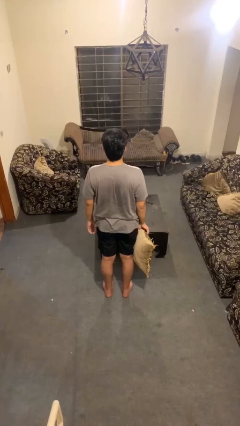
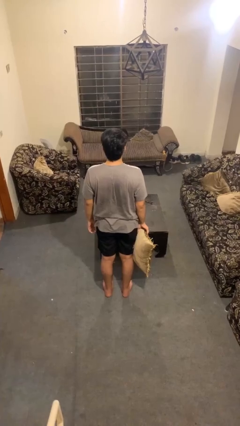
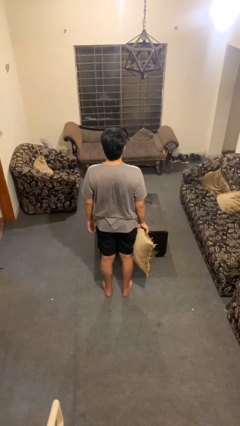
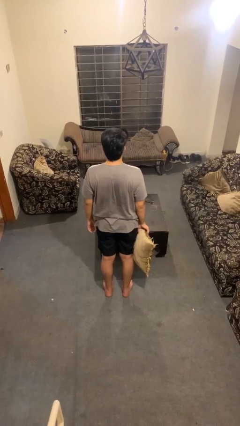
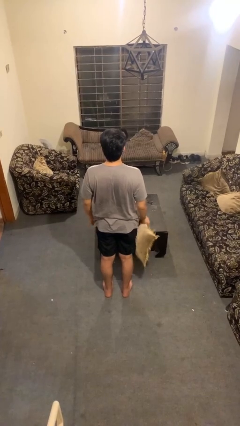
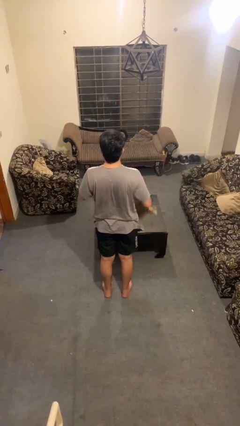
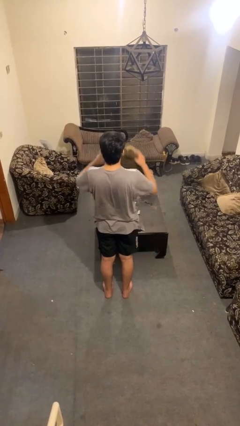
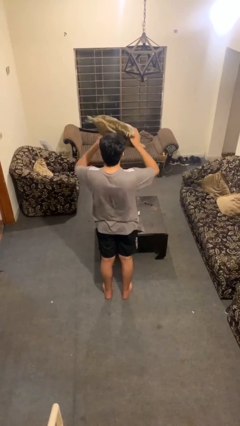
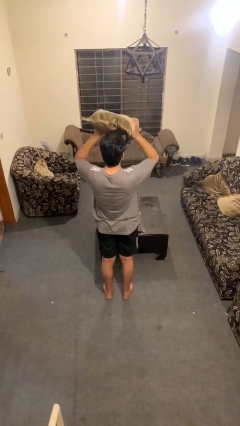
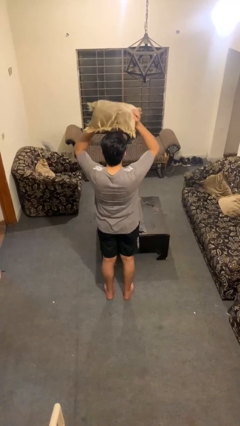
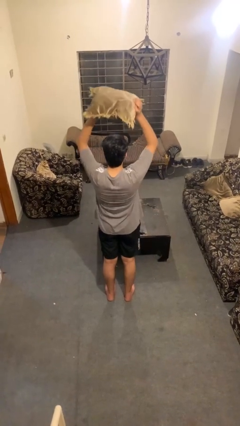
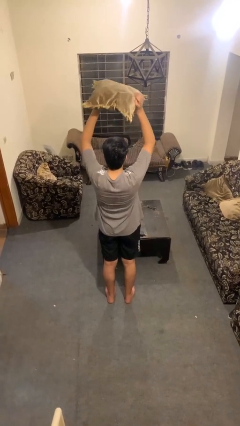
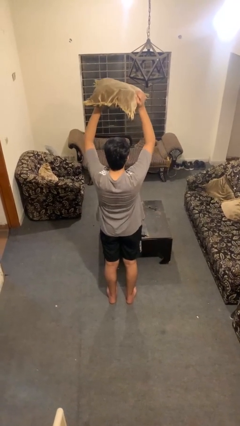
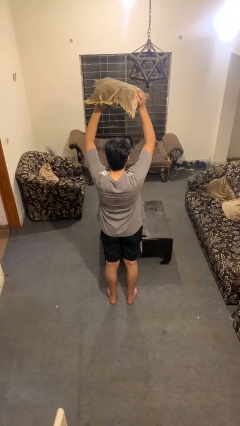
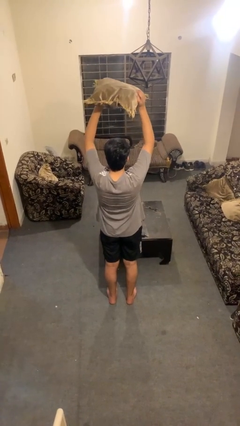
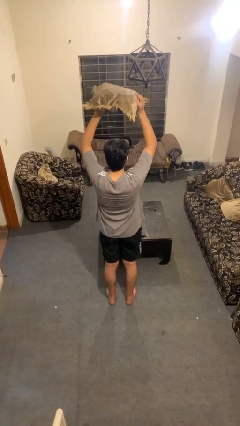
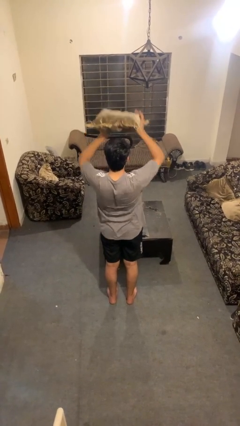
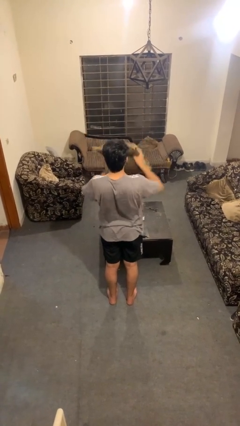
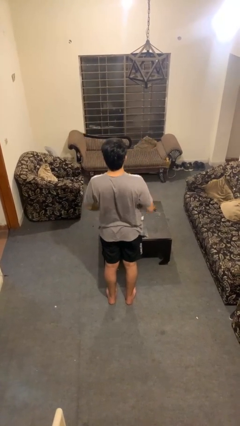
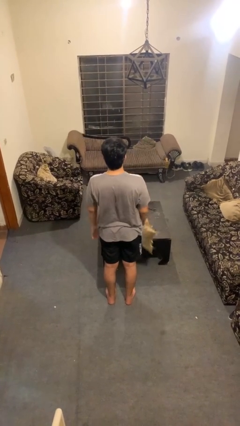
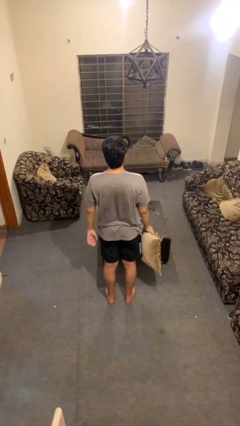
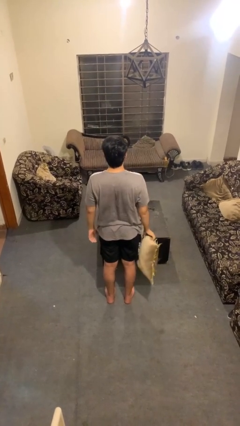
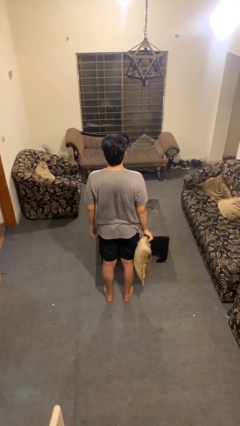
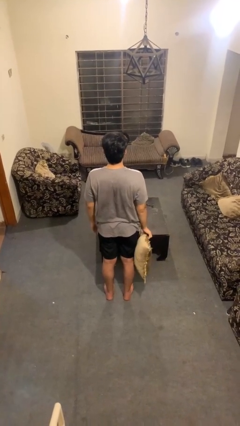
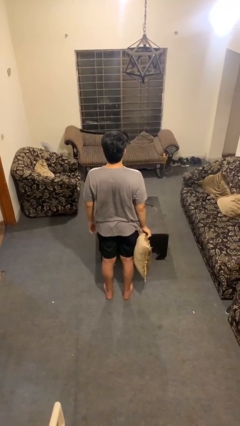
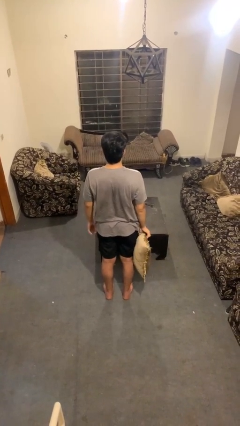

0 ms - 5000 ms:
person holds object above head

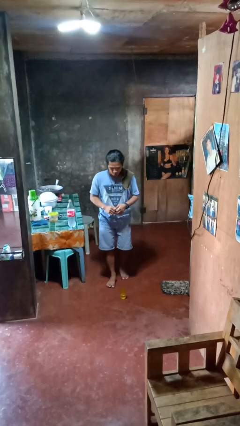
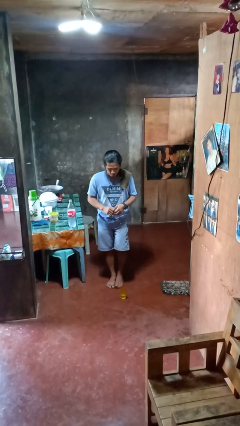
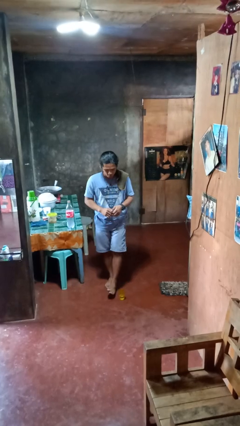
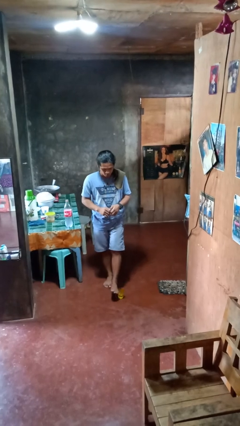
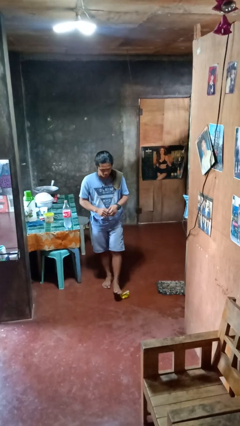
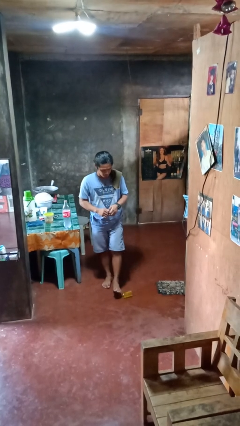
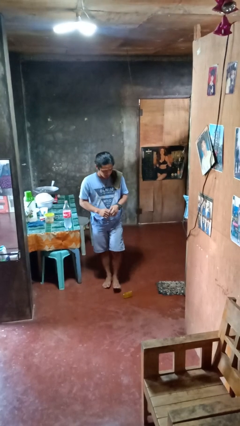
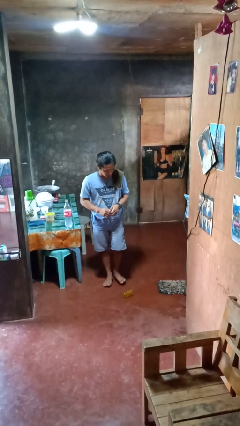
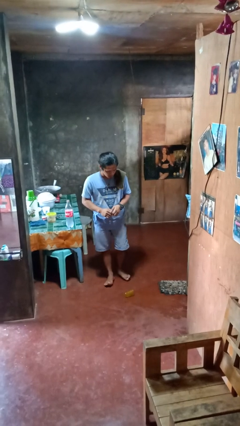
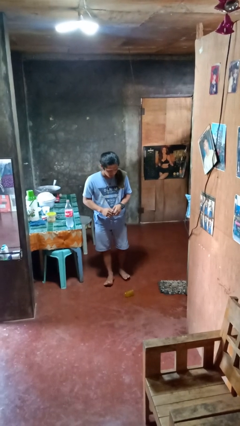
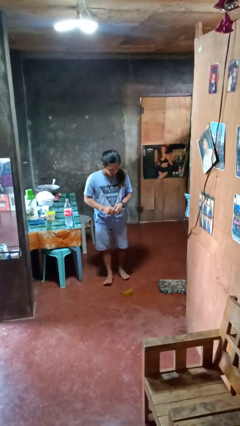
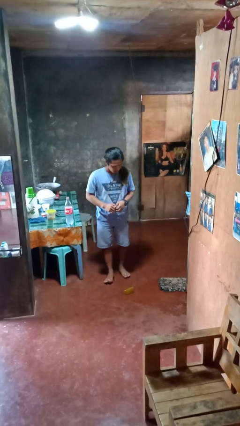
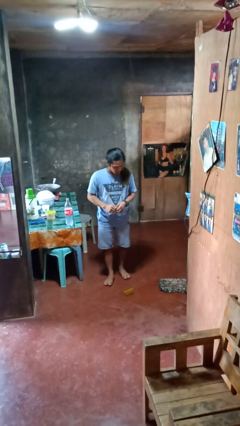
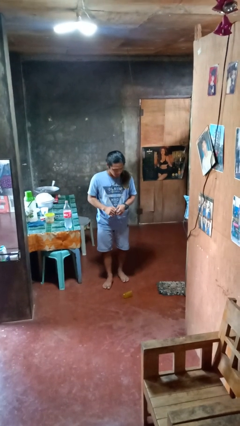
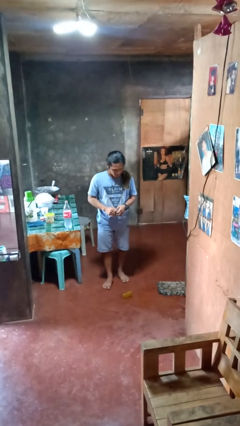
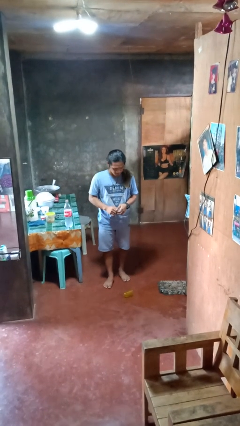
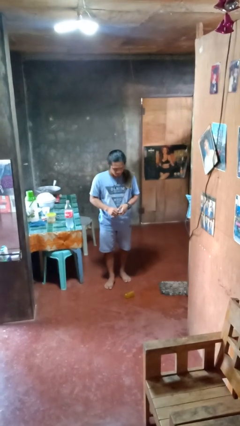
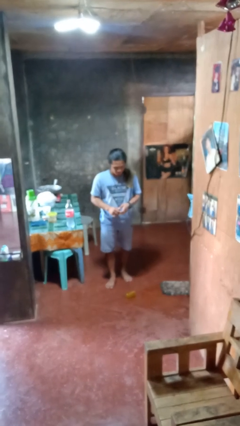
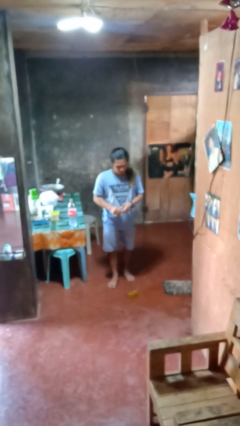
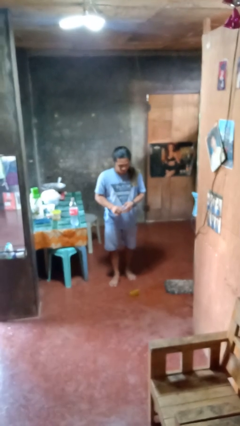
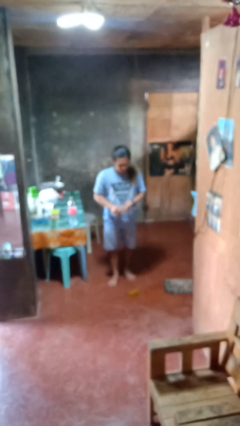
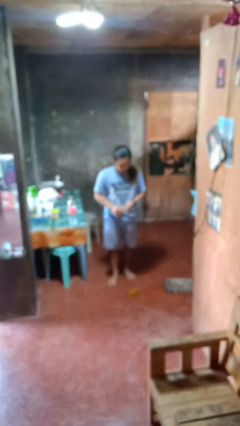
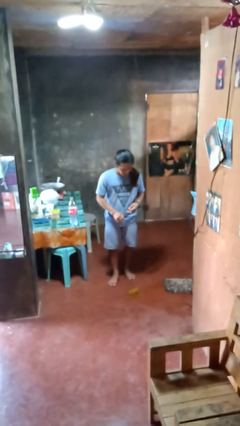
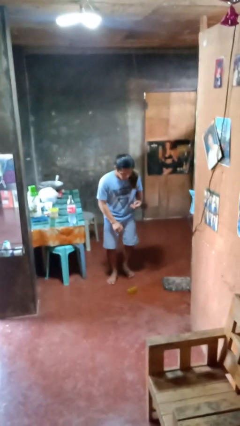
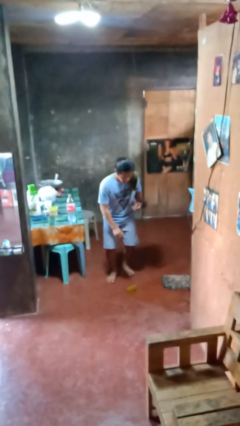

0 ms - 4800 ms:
person spills on floor

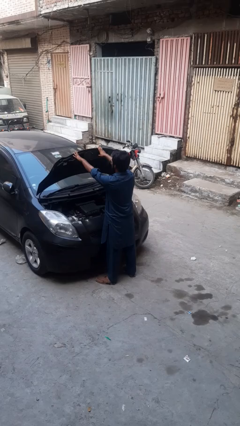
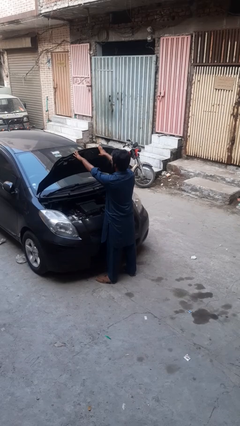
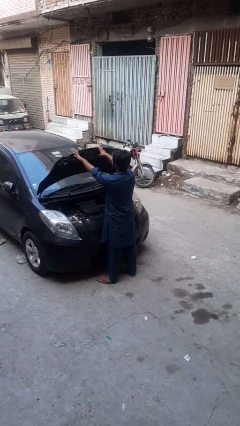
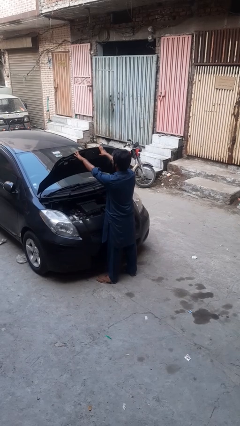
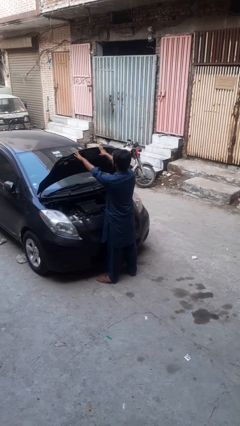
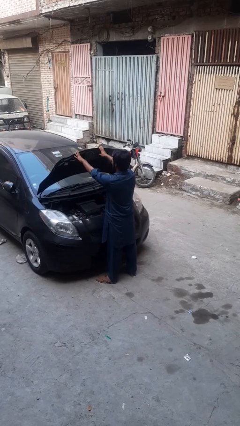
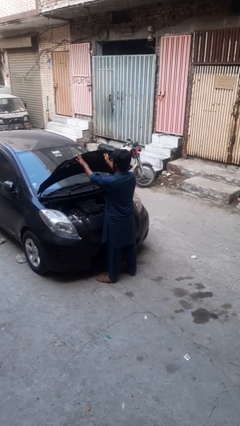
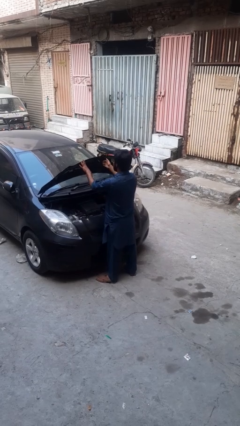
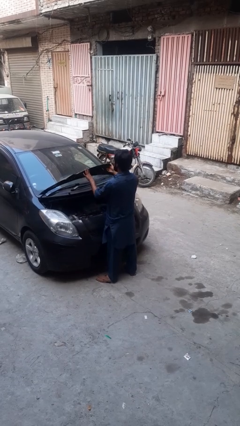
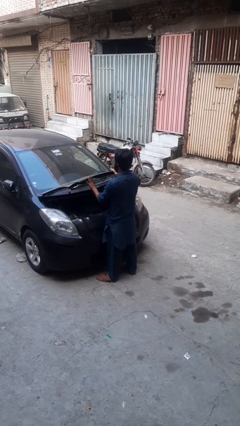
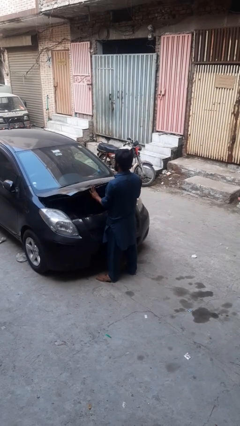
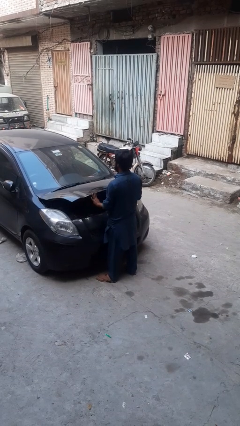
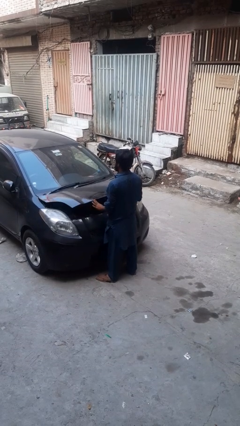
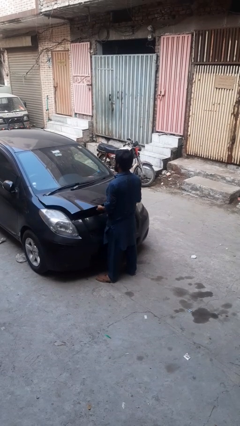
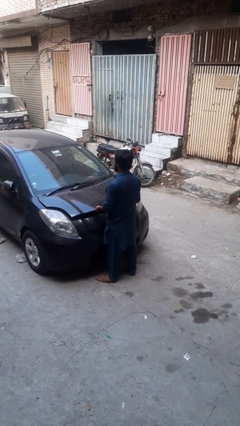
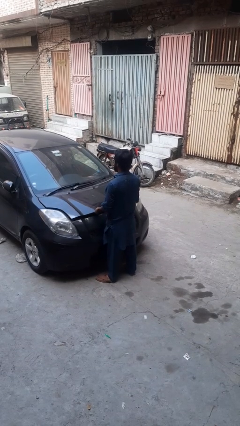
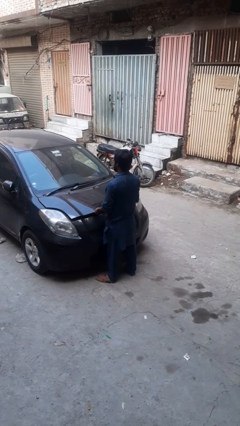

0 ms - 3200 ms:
person closes car hood

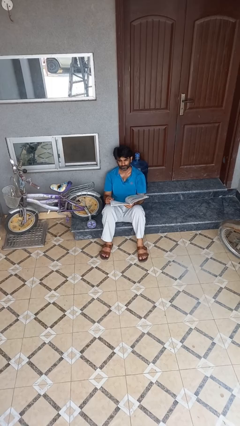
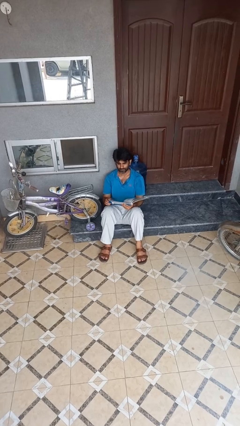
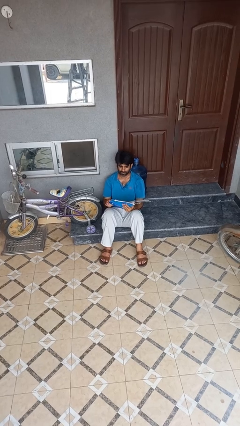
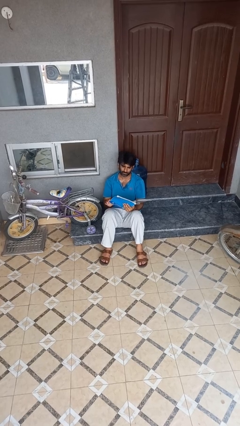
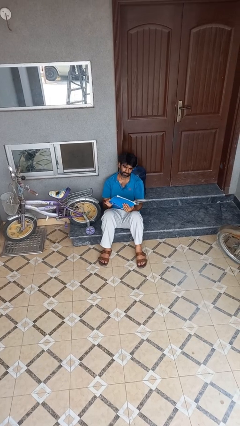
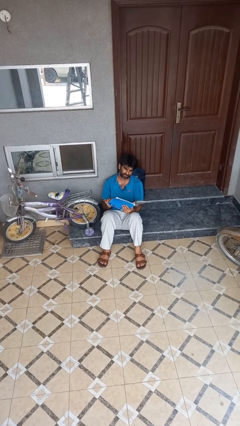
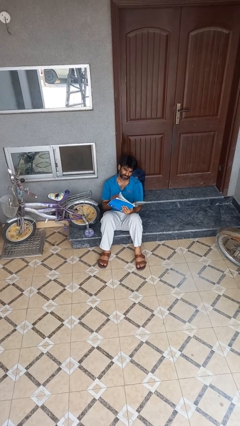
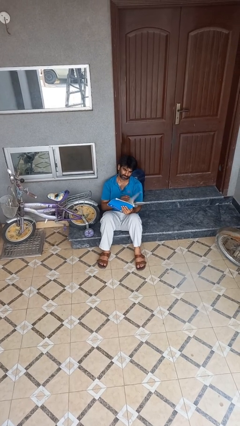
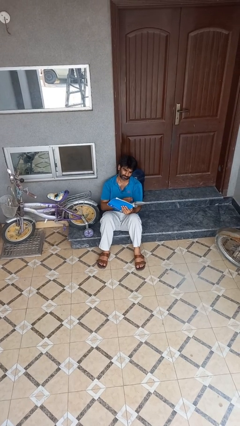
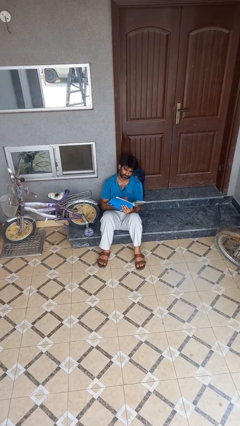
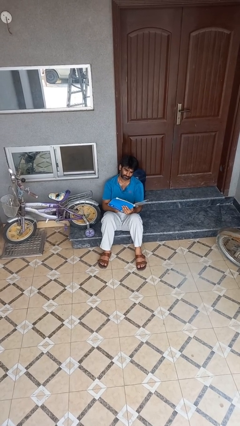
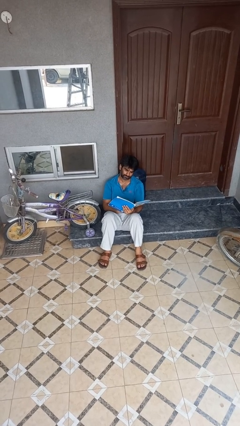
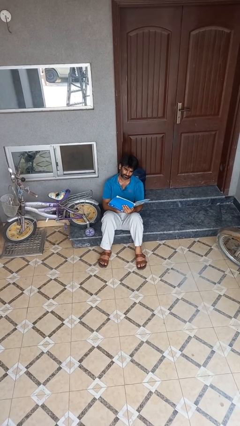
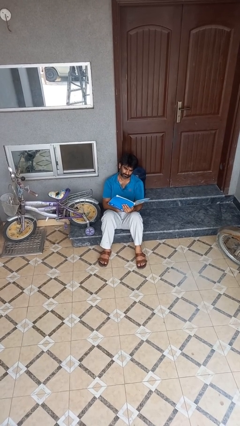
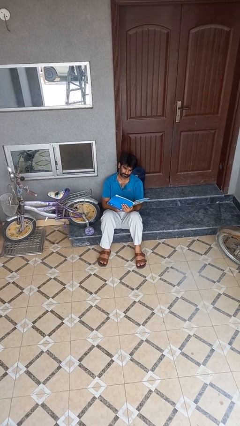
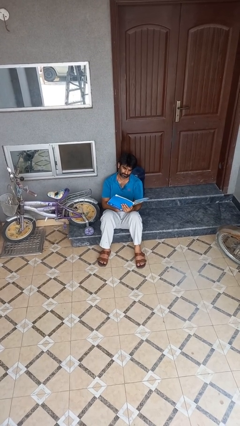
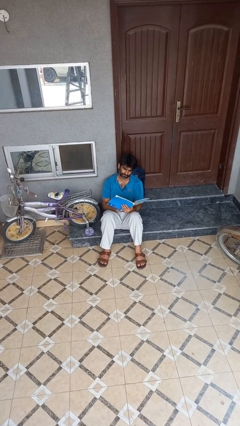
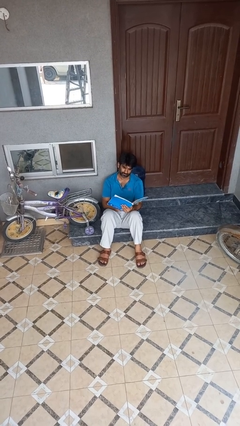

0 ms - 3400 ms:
person reads book

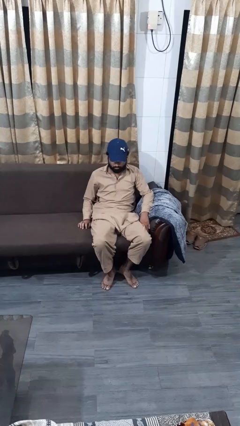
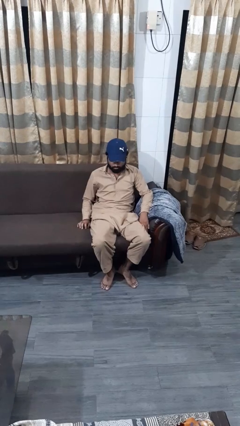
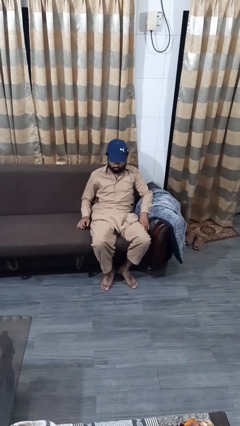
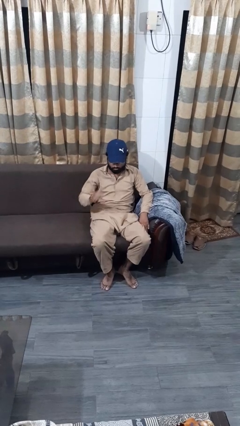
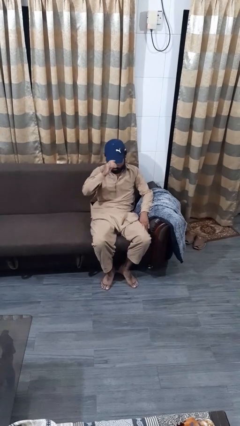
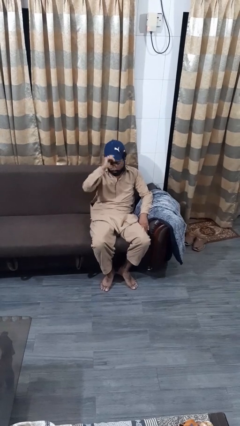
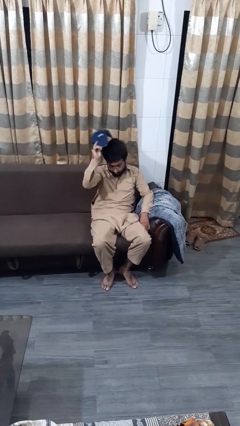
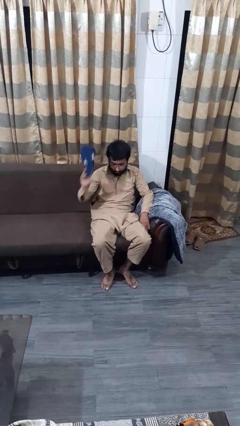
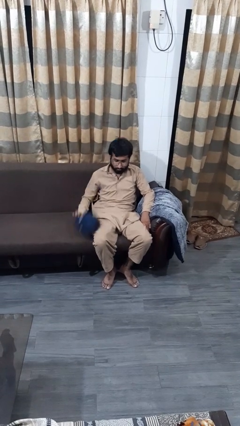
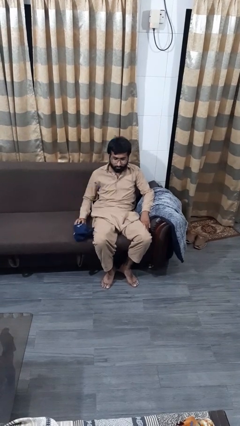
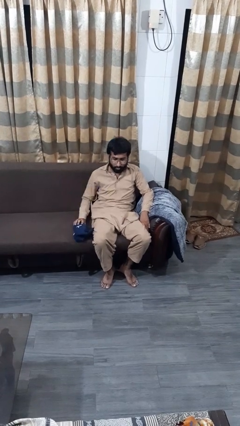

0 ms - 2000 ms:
person takes off hat
